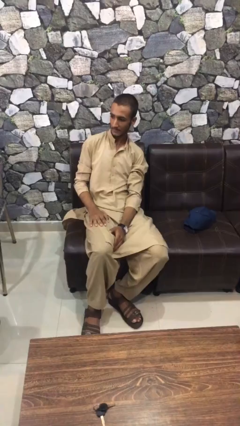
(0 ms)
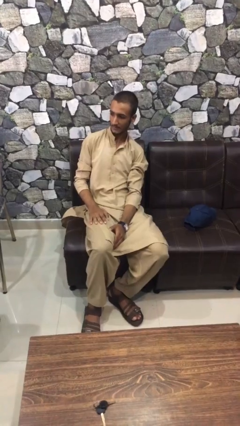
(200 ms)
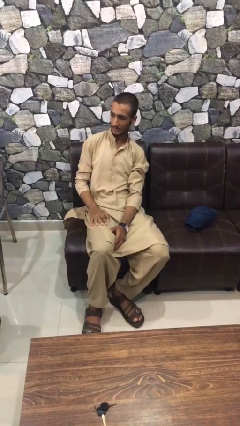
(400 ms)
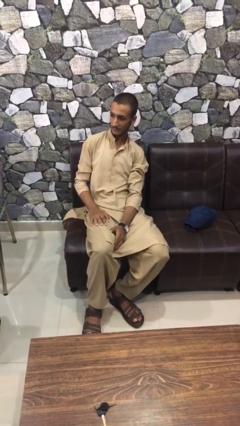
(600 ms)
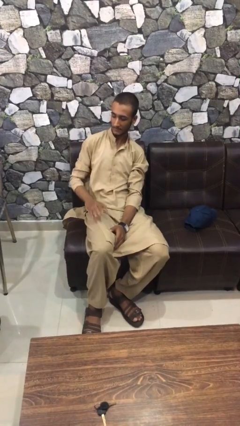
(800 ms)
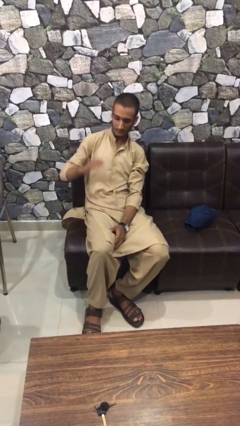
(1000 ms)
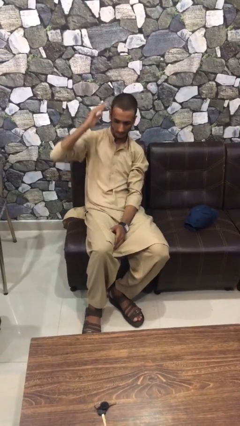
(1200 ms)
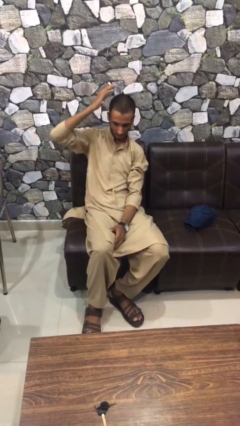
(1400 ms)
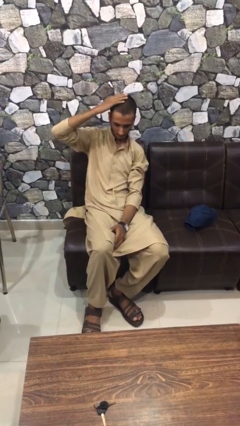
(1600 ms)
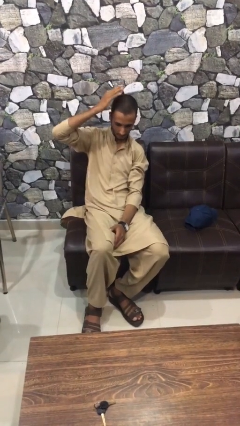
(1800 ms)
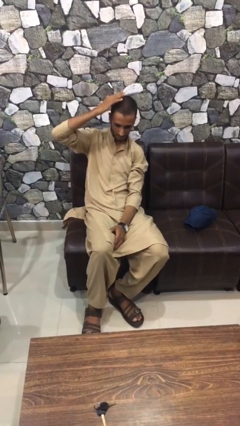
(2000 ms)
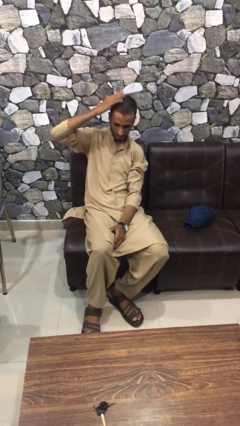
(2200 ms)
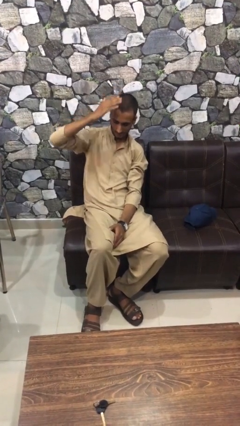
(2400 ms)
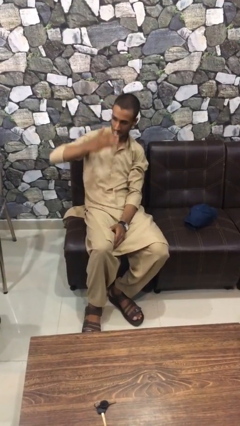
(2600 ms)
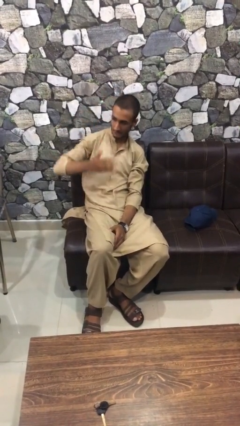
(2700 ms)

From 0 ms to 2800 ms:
person pats head

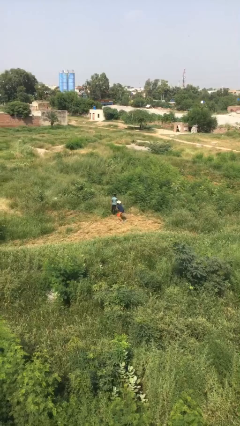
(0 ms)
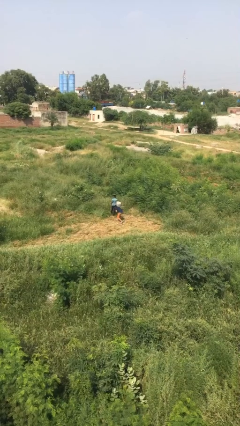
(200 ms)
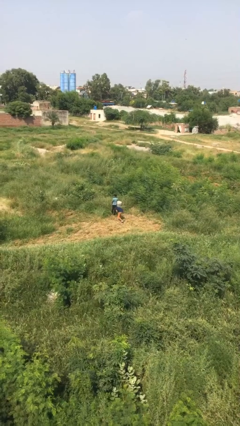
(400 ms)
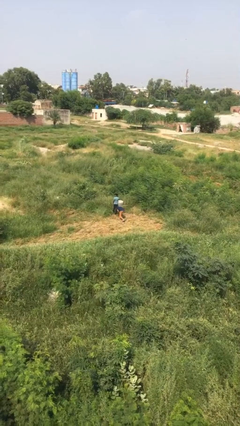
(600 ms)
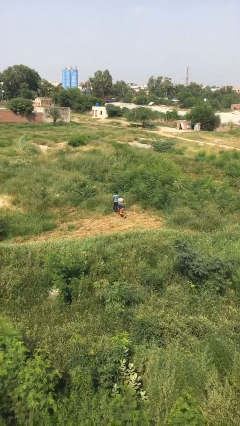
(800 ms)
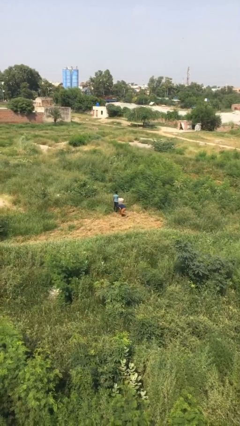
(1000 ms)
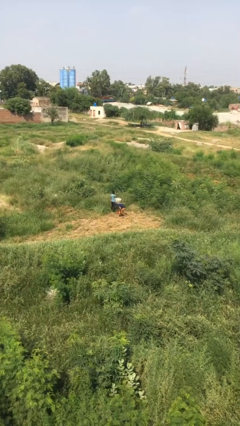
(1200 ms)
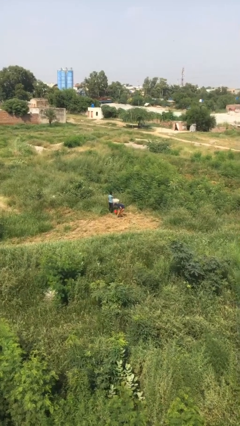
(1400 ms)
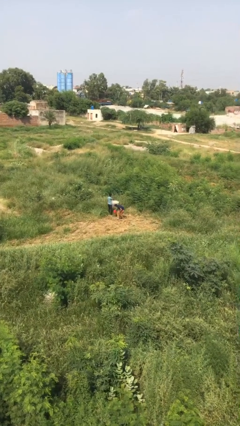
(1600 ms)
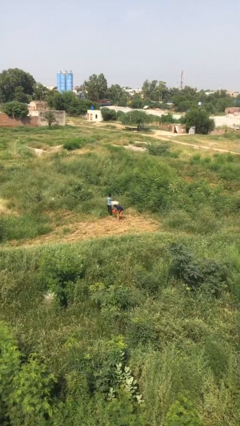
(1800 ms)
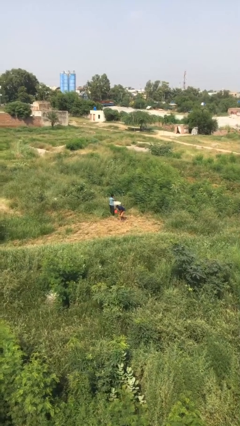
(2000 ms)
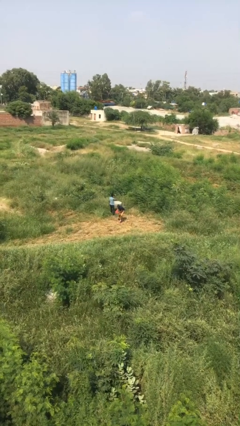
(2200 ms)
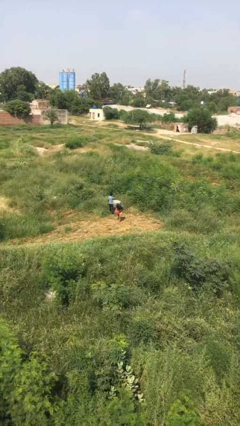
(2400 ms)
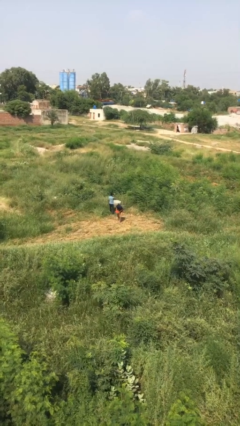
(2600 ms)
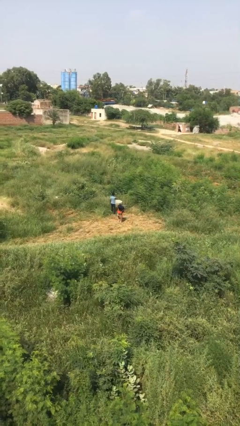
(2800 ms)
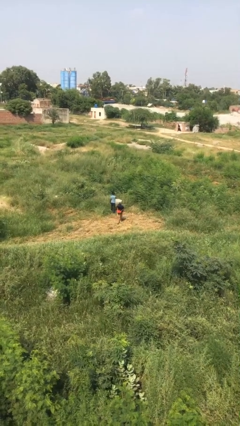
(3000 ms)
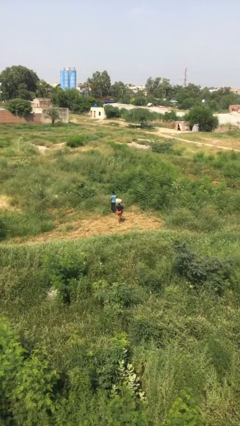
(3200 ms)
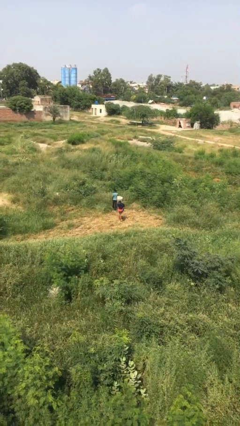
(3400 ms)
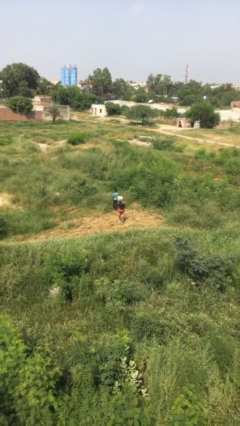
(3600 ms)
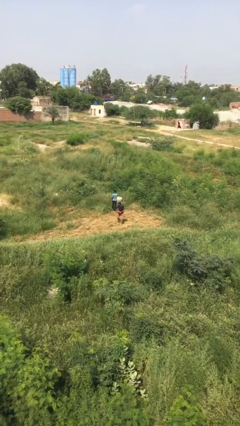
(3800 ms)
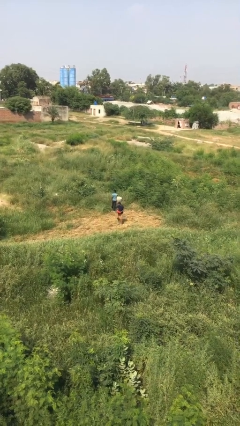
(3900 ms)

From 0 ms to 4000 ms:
person steals object from person

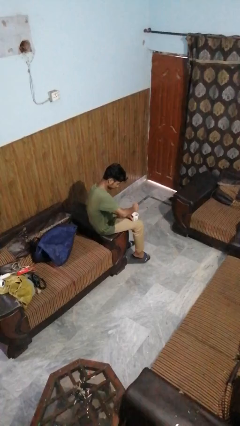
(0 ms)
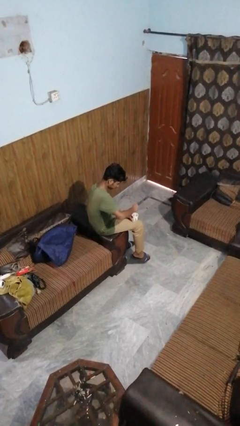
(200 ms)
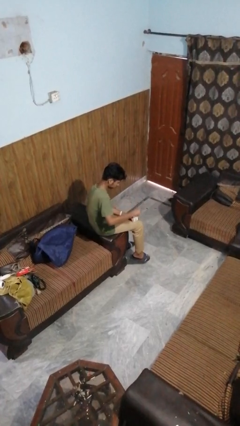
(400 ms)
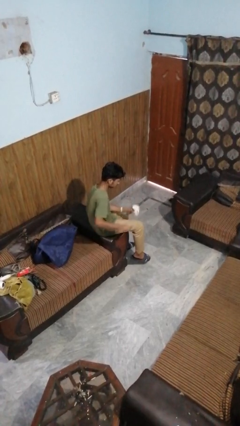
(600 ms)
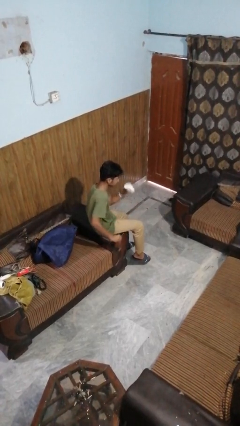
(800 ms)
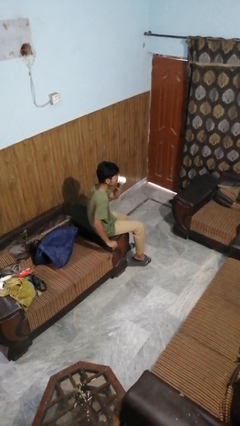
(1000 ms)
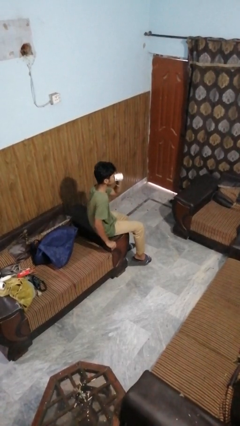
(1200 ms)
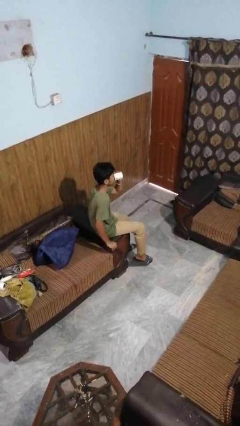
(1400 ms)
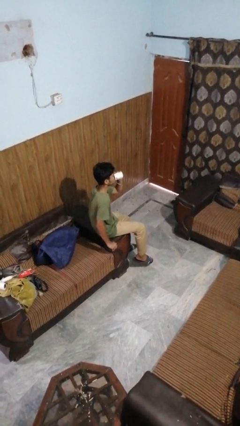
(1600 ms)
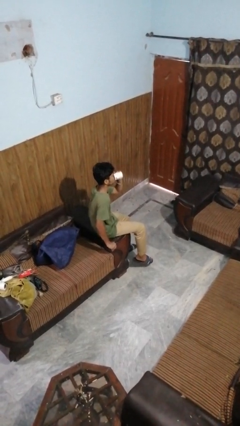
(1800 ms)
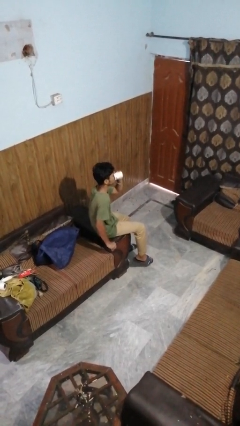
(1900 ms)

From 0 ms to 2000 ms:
person drinks from mug

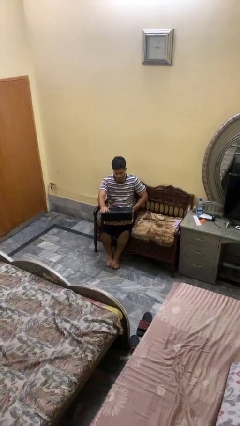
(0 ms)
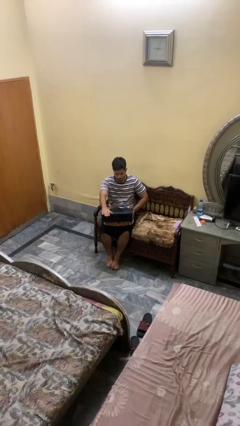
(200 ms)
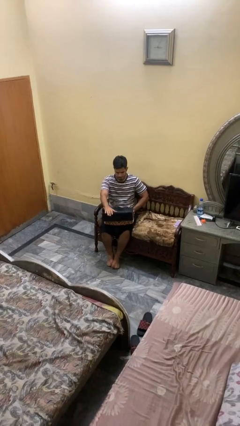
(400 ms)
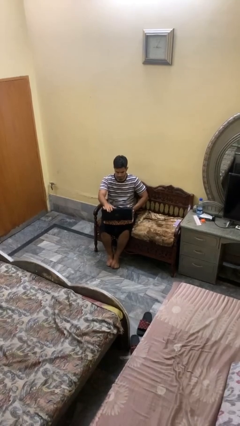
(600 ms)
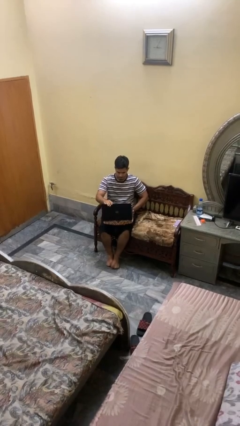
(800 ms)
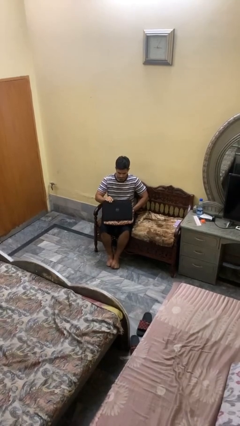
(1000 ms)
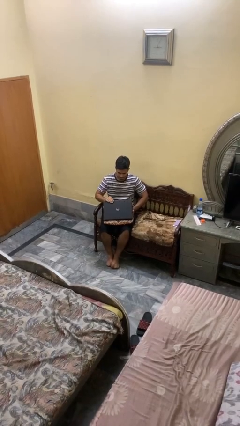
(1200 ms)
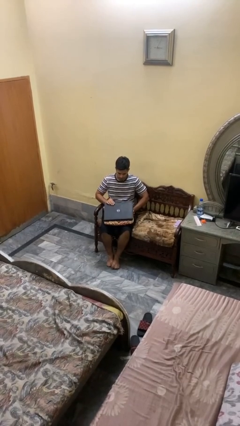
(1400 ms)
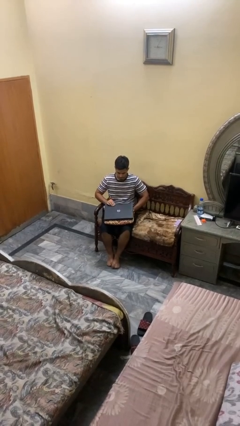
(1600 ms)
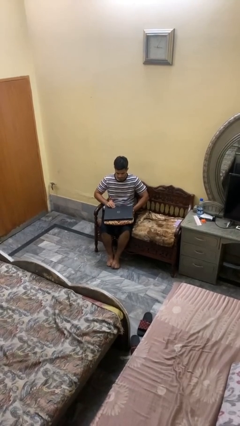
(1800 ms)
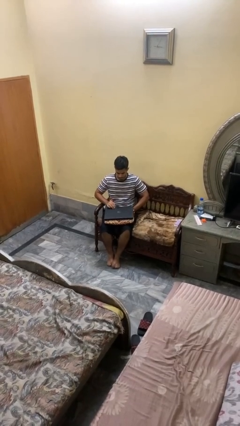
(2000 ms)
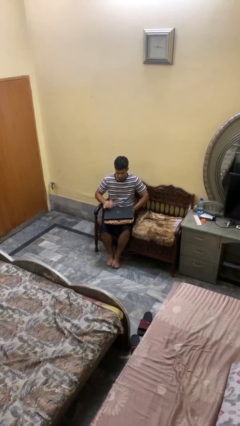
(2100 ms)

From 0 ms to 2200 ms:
person closes laptop

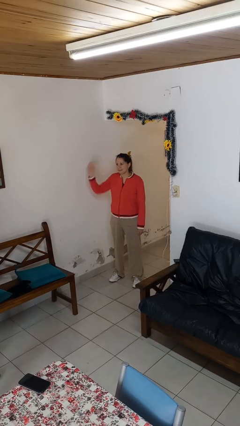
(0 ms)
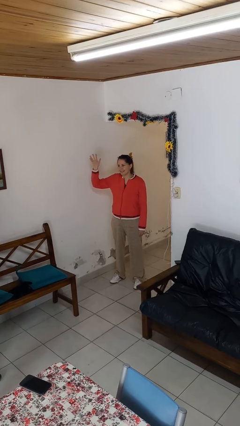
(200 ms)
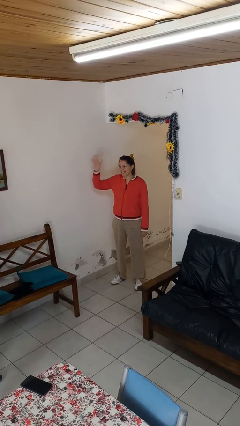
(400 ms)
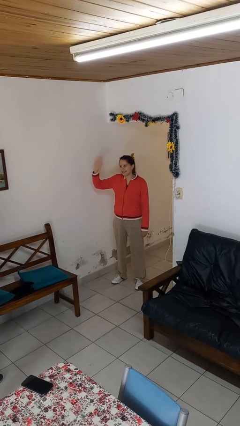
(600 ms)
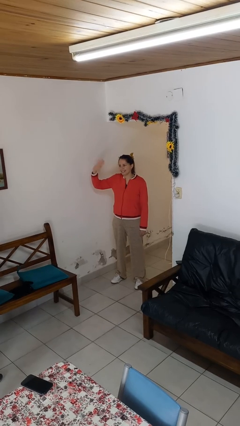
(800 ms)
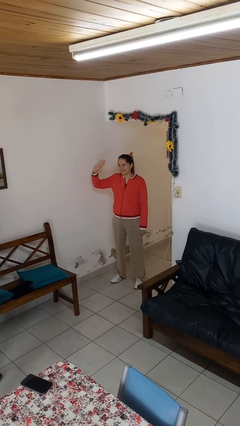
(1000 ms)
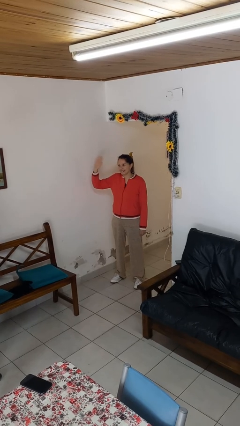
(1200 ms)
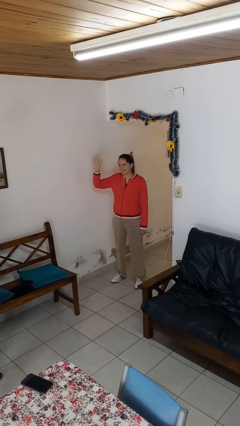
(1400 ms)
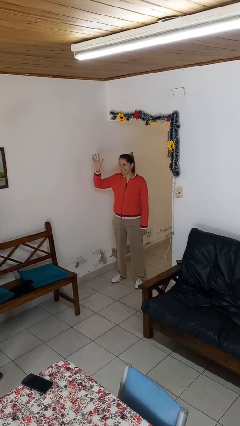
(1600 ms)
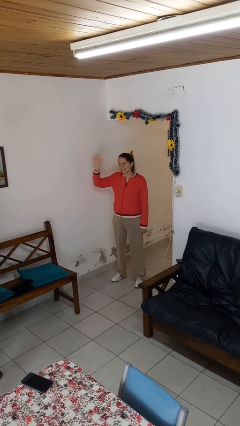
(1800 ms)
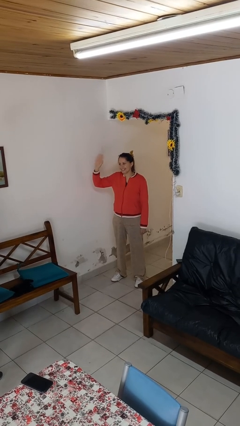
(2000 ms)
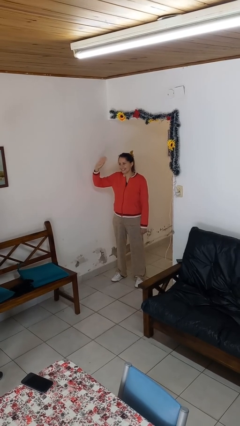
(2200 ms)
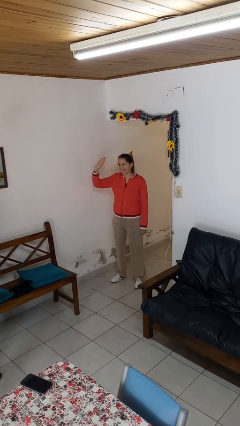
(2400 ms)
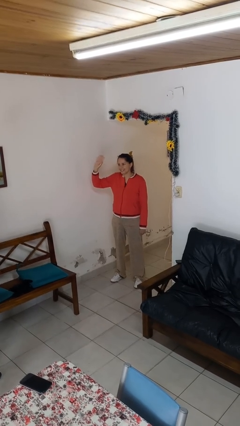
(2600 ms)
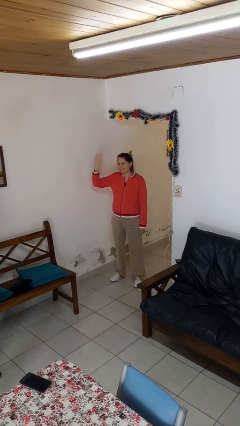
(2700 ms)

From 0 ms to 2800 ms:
person waves at person

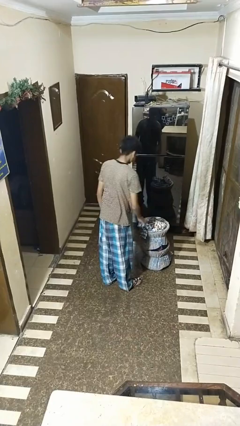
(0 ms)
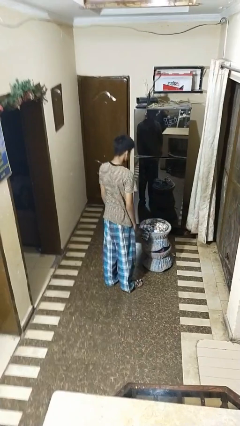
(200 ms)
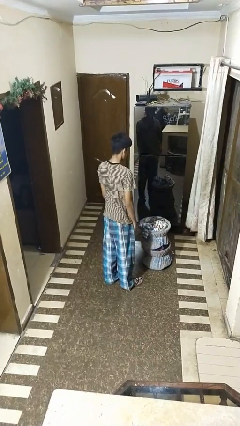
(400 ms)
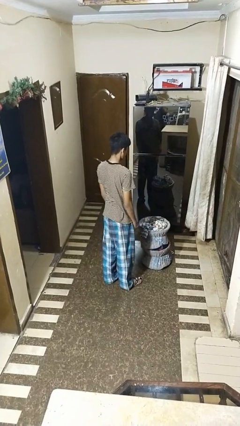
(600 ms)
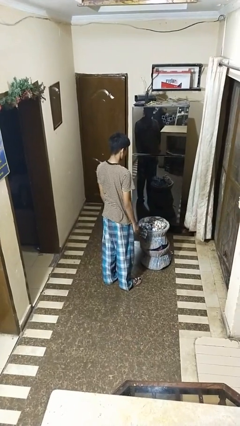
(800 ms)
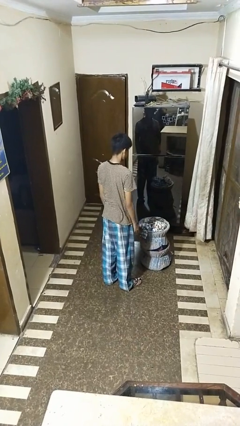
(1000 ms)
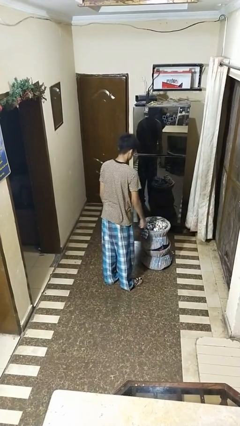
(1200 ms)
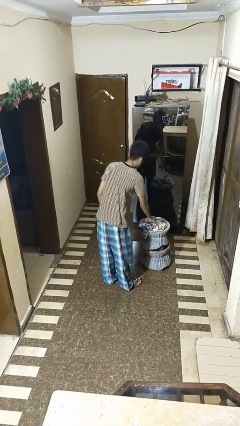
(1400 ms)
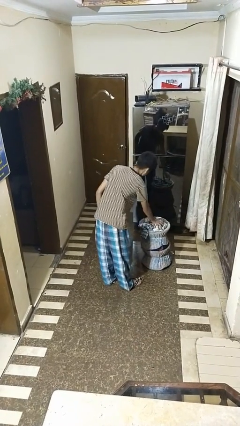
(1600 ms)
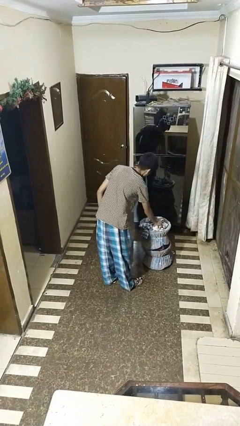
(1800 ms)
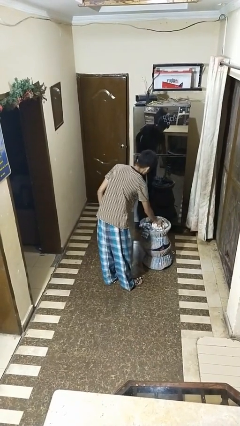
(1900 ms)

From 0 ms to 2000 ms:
person takes object from basket

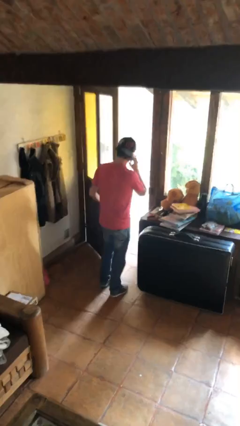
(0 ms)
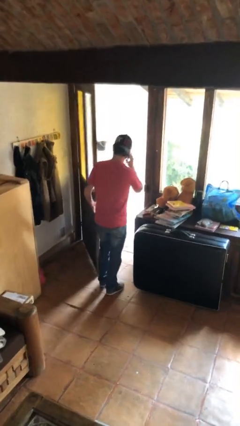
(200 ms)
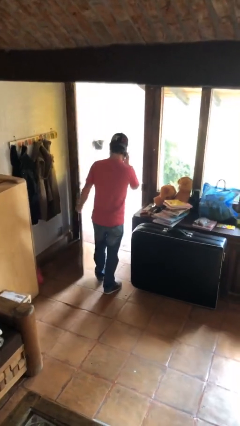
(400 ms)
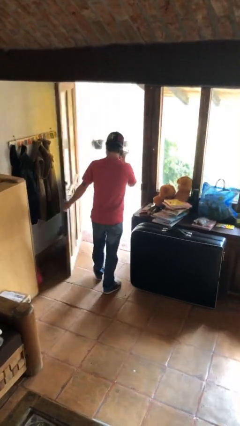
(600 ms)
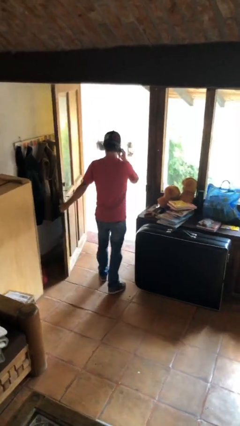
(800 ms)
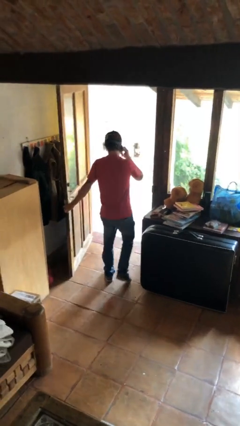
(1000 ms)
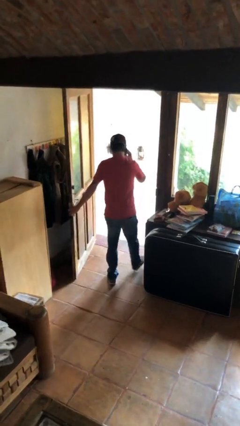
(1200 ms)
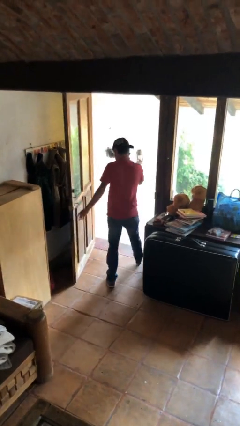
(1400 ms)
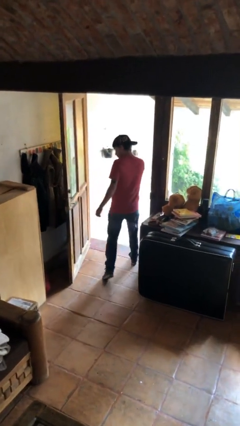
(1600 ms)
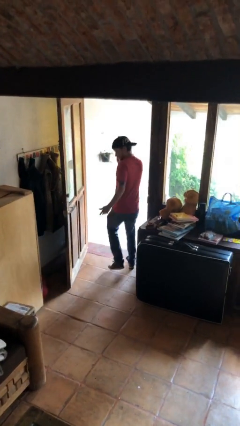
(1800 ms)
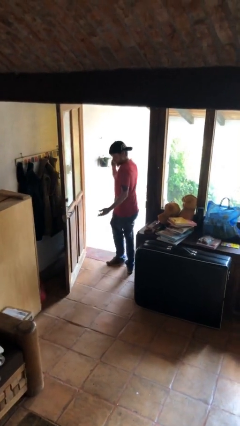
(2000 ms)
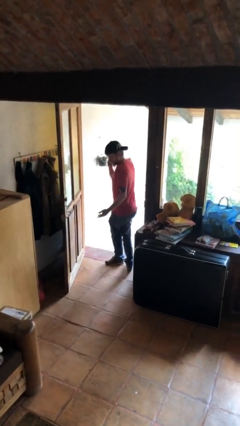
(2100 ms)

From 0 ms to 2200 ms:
person exits scene through structure
